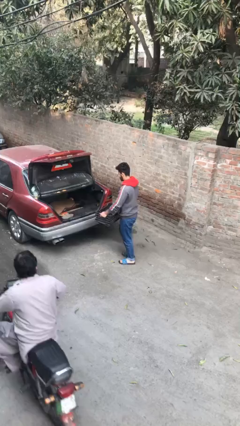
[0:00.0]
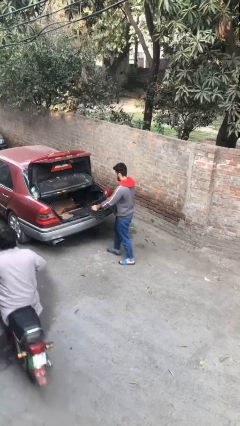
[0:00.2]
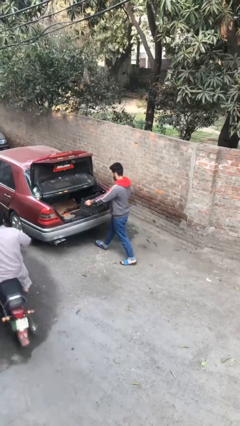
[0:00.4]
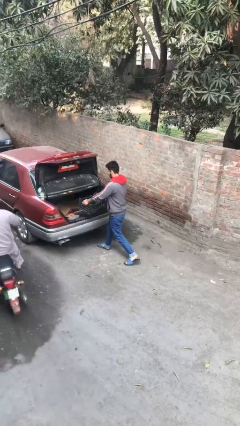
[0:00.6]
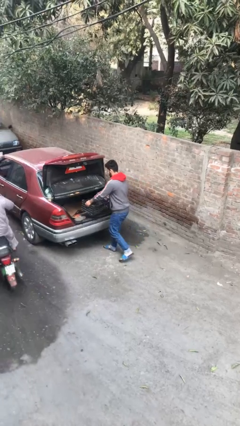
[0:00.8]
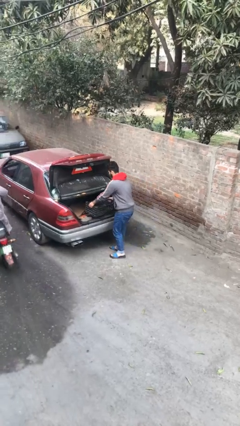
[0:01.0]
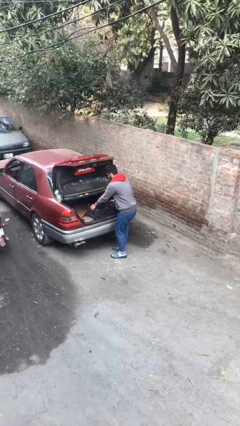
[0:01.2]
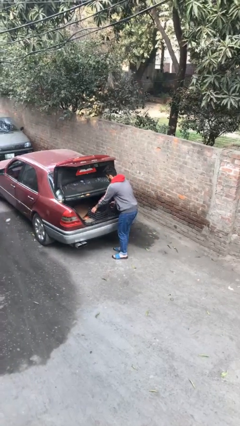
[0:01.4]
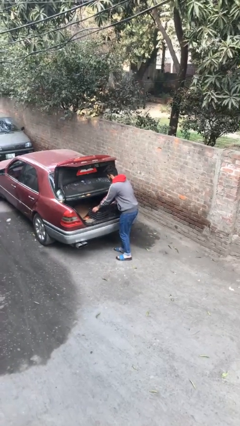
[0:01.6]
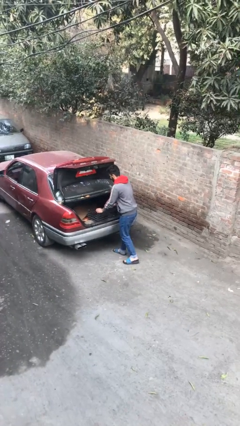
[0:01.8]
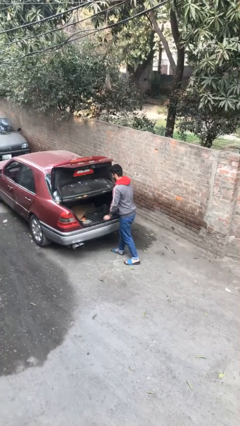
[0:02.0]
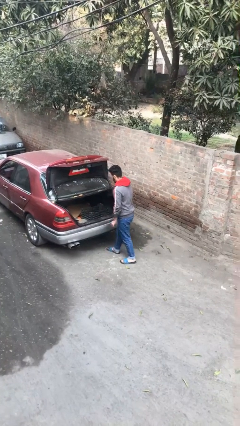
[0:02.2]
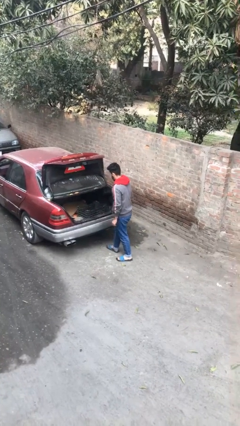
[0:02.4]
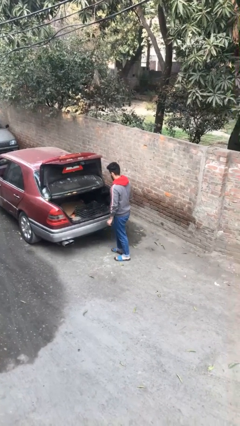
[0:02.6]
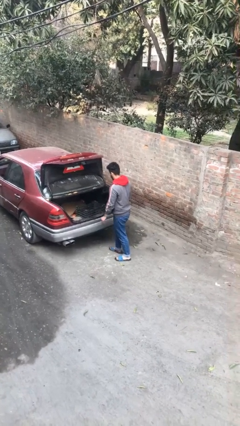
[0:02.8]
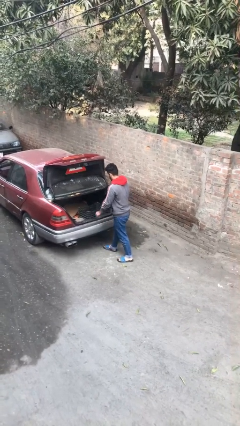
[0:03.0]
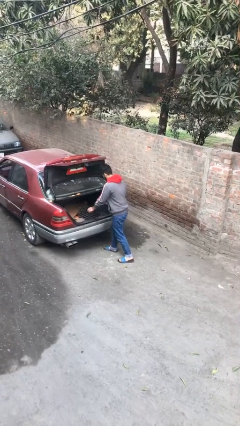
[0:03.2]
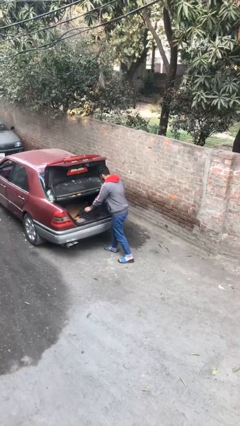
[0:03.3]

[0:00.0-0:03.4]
person loads car

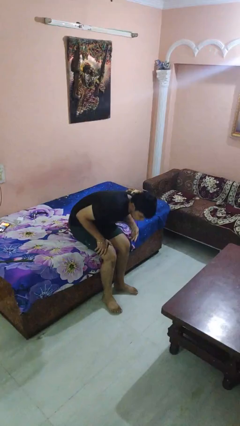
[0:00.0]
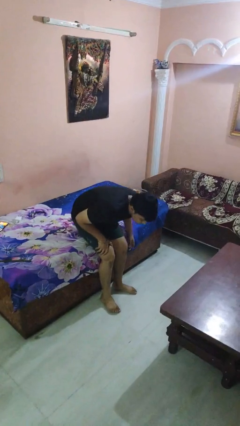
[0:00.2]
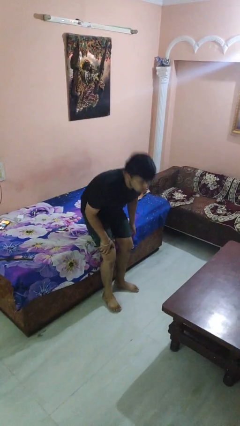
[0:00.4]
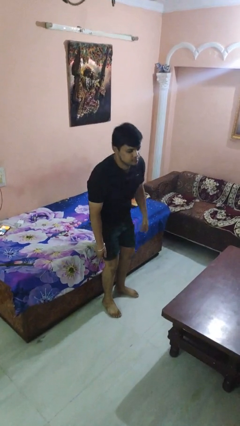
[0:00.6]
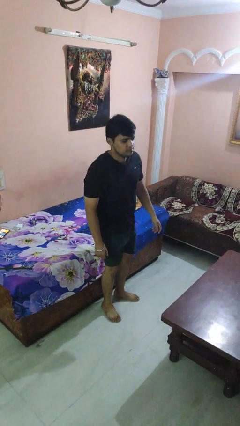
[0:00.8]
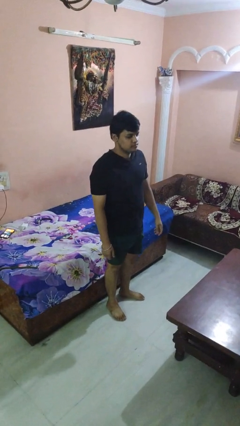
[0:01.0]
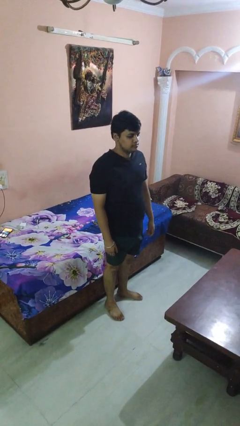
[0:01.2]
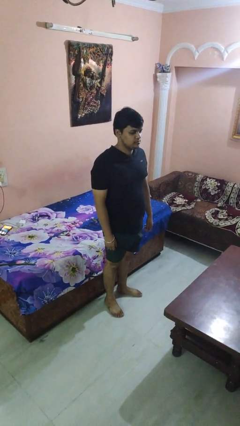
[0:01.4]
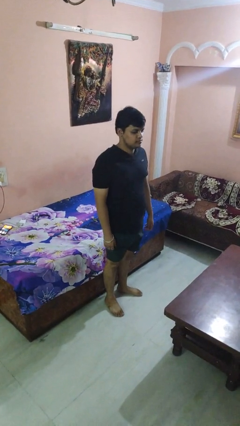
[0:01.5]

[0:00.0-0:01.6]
person stands up

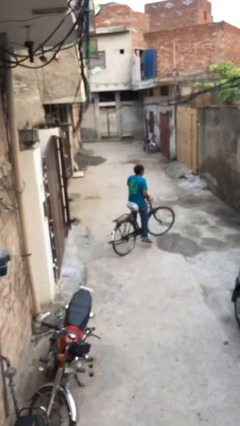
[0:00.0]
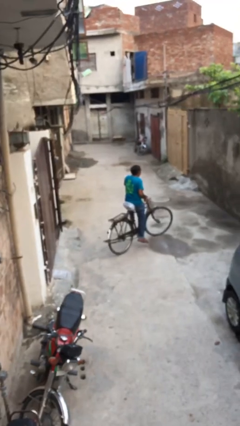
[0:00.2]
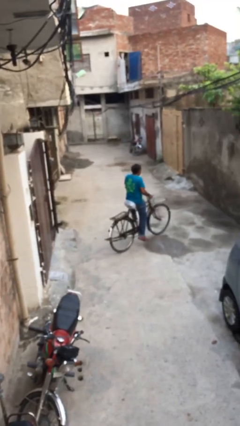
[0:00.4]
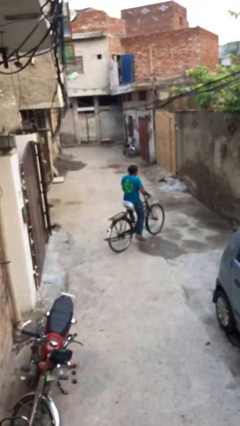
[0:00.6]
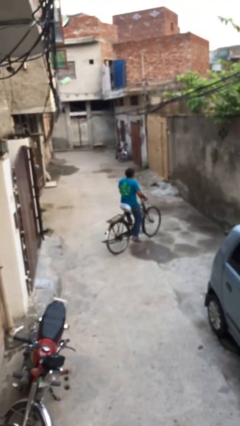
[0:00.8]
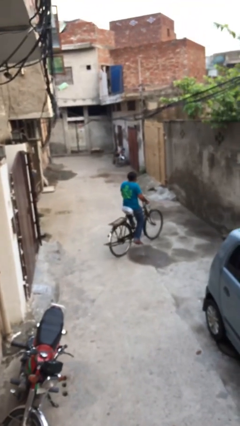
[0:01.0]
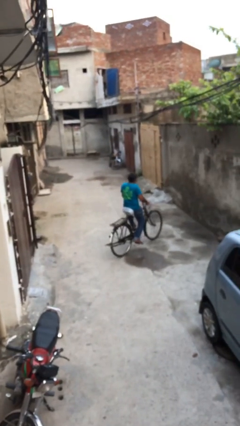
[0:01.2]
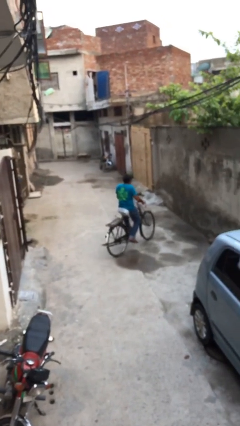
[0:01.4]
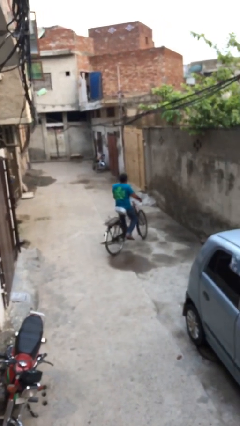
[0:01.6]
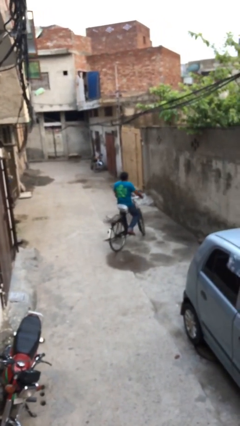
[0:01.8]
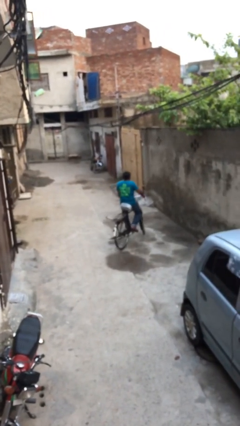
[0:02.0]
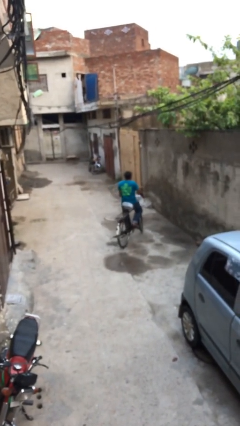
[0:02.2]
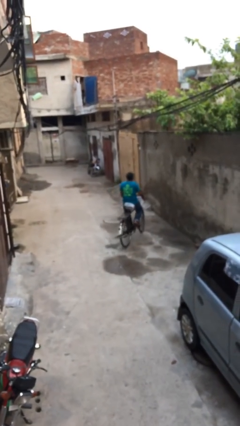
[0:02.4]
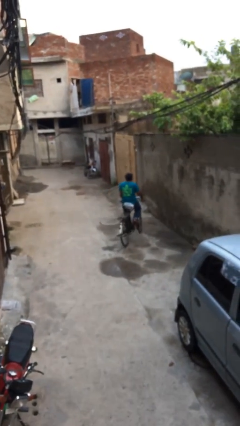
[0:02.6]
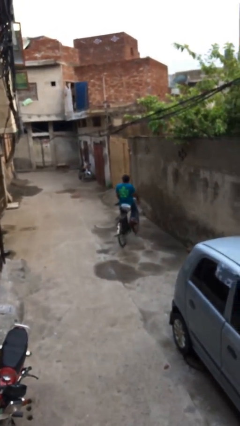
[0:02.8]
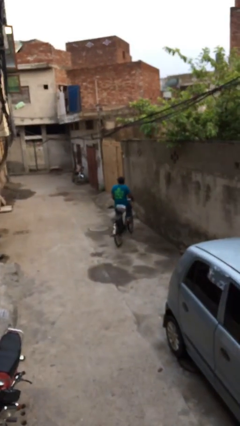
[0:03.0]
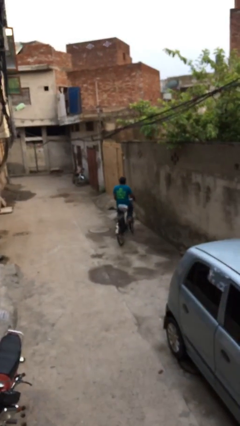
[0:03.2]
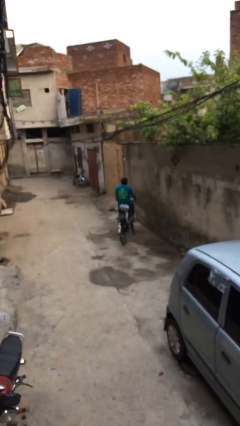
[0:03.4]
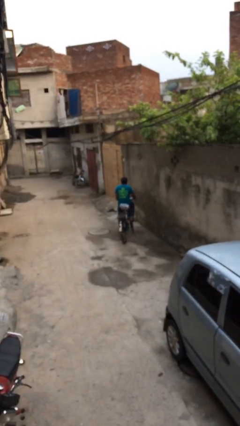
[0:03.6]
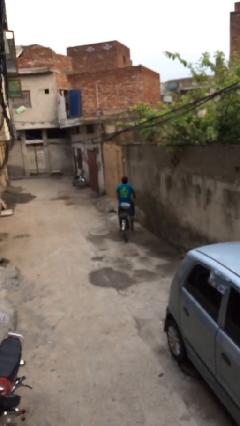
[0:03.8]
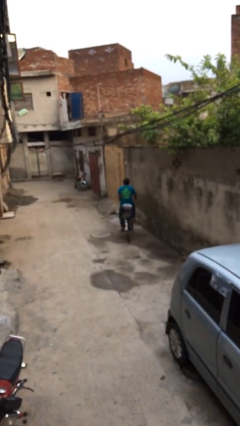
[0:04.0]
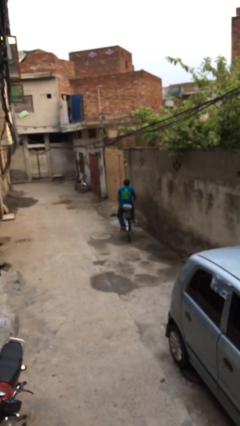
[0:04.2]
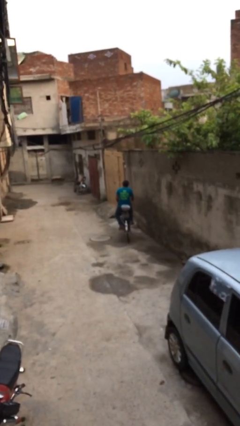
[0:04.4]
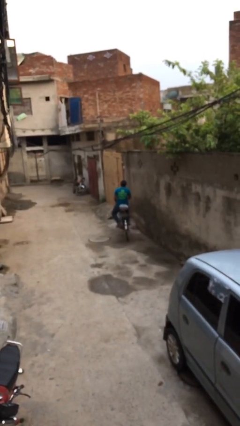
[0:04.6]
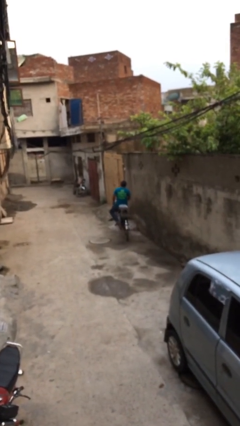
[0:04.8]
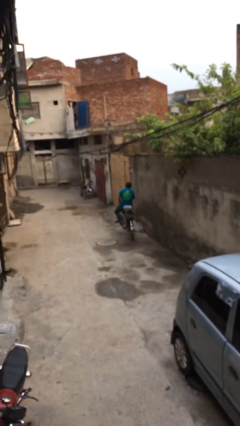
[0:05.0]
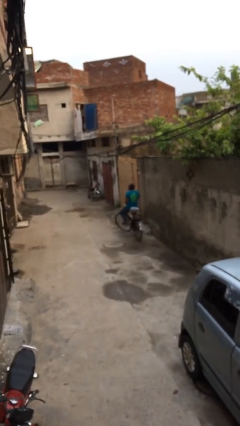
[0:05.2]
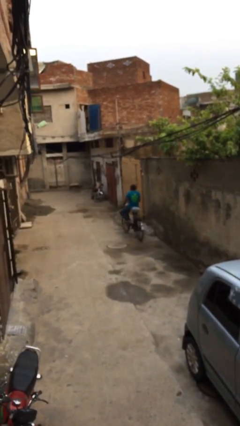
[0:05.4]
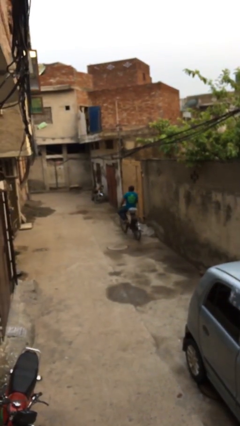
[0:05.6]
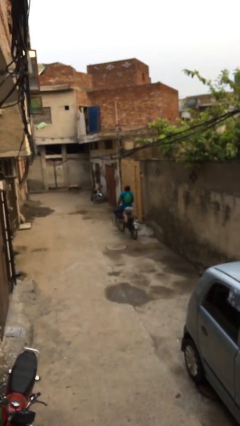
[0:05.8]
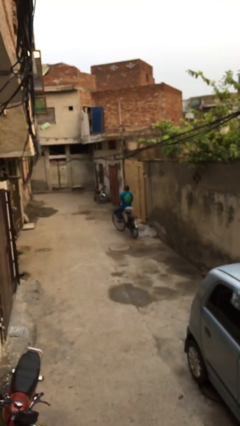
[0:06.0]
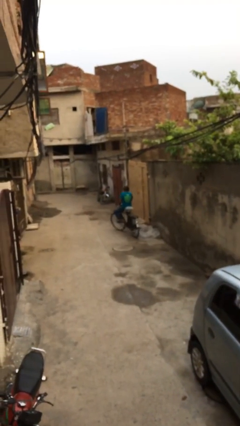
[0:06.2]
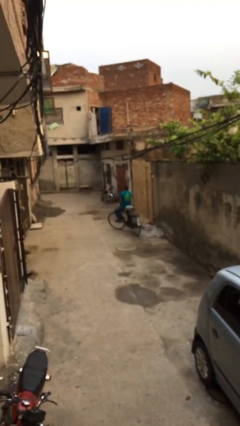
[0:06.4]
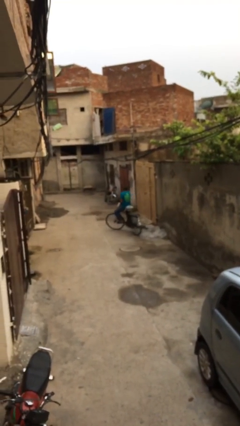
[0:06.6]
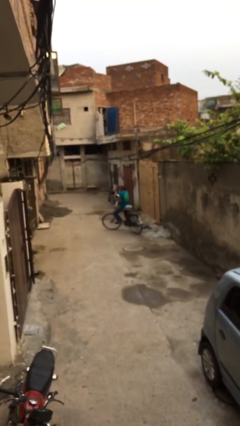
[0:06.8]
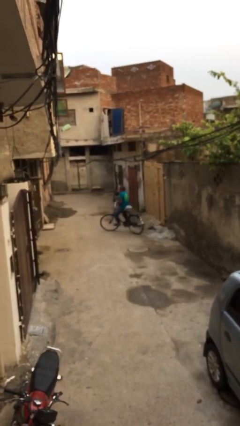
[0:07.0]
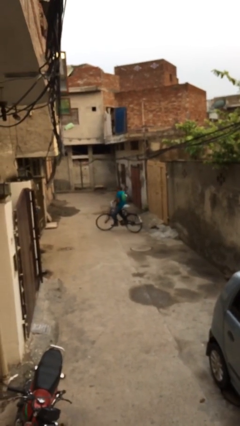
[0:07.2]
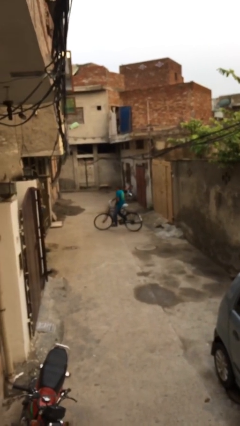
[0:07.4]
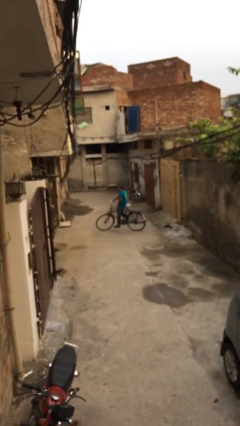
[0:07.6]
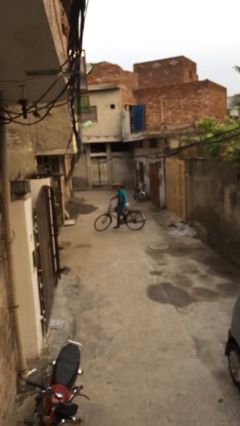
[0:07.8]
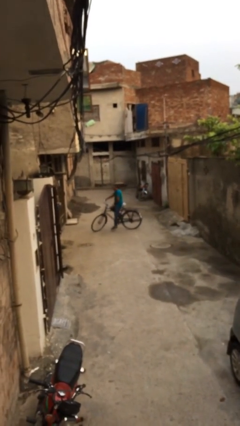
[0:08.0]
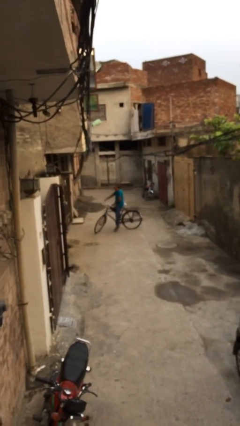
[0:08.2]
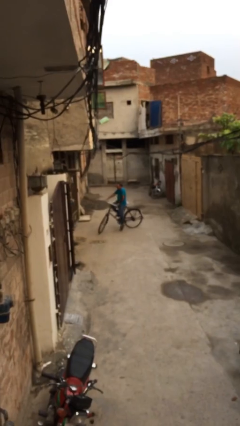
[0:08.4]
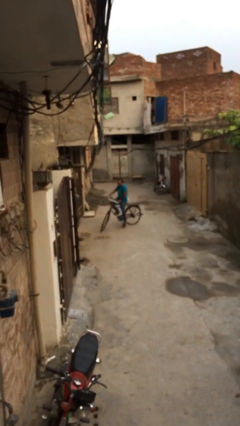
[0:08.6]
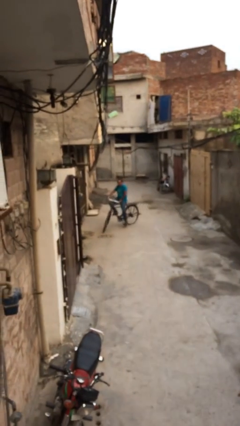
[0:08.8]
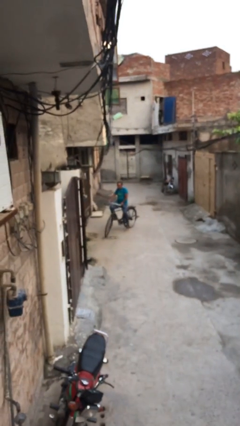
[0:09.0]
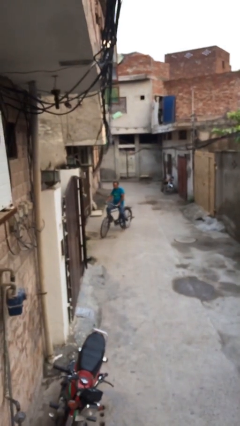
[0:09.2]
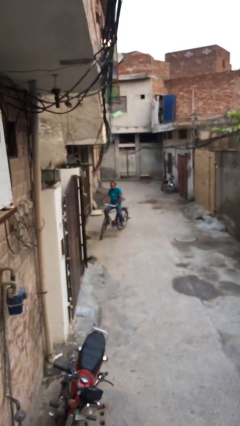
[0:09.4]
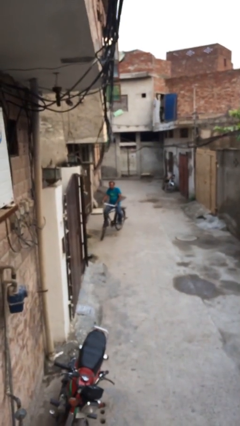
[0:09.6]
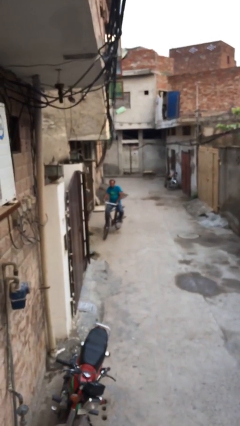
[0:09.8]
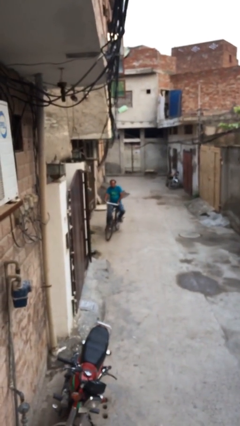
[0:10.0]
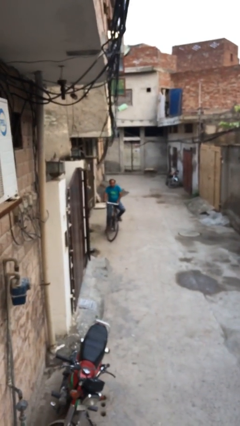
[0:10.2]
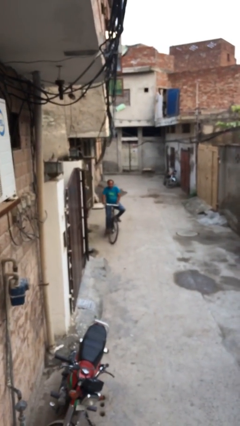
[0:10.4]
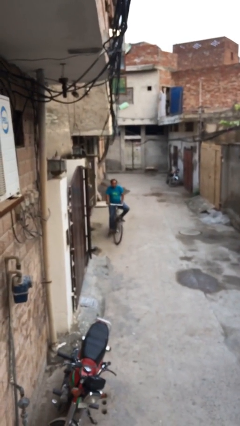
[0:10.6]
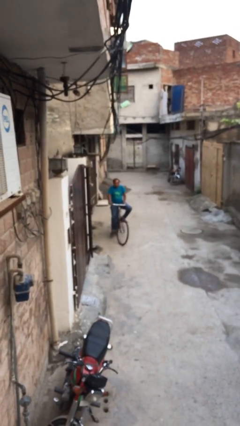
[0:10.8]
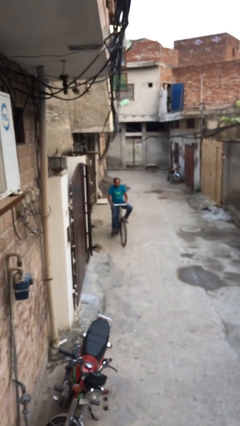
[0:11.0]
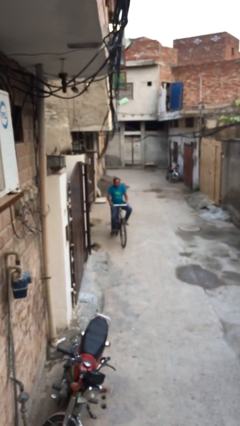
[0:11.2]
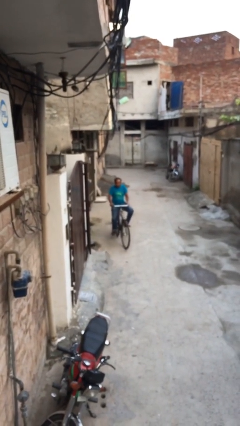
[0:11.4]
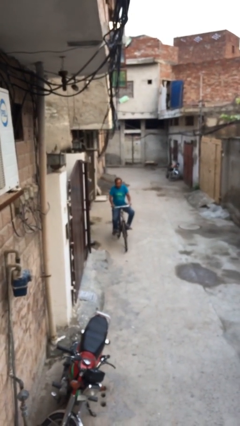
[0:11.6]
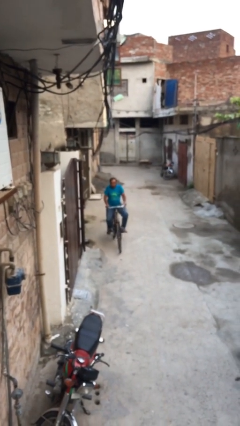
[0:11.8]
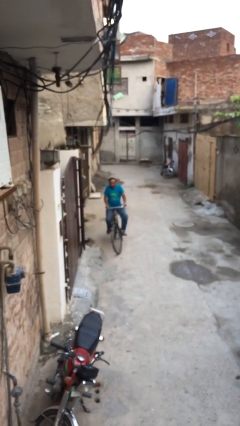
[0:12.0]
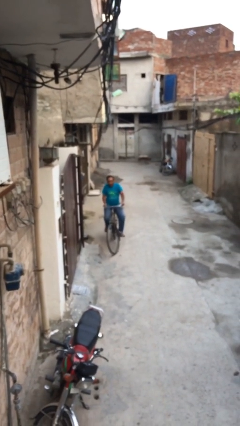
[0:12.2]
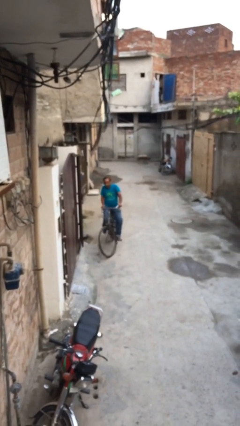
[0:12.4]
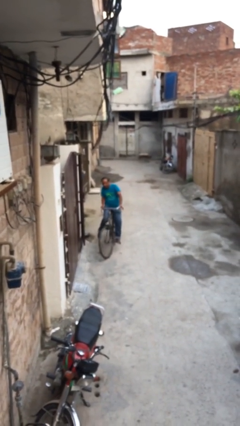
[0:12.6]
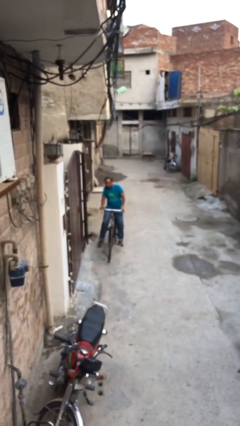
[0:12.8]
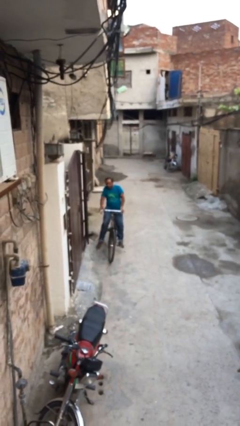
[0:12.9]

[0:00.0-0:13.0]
person rides bicycle
